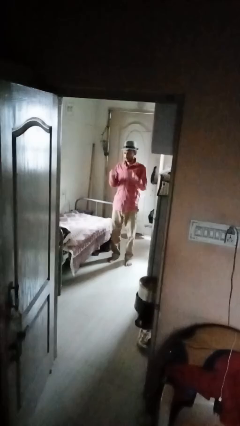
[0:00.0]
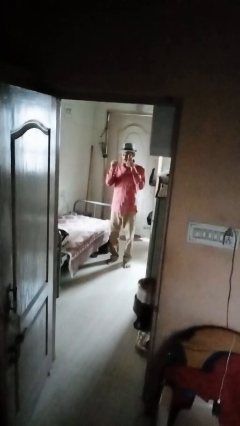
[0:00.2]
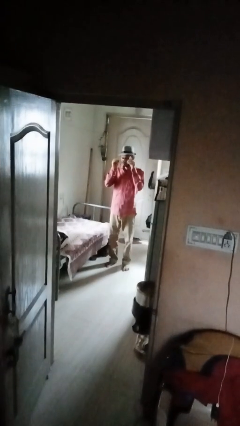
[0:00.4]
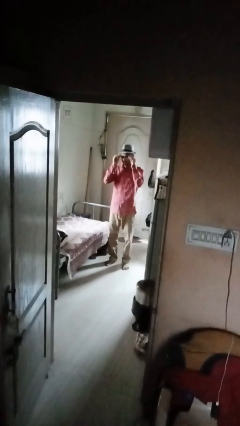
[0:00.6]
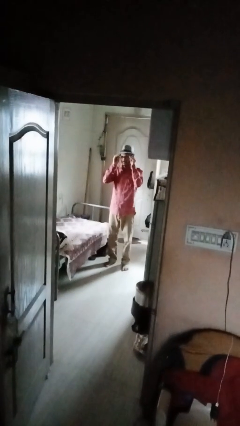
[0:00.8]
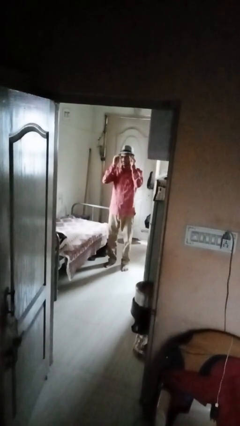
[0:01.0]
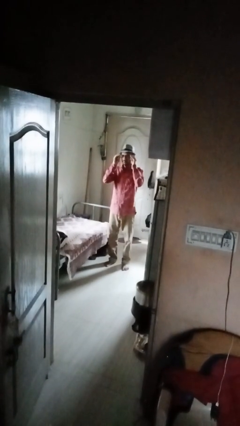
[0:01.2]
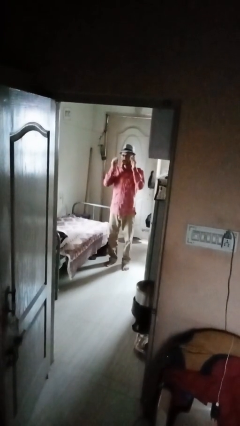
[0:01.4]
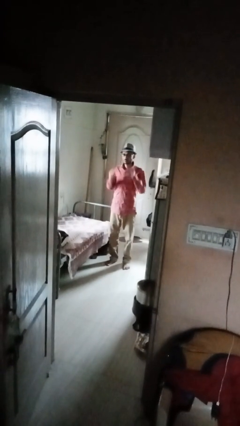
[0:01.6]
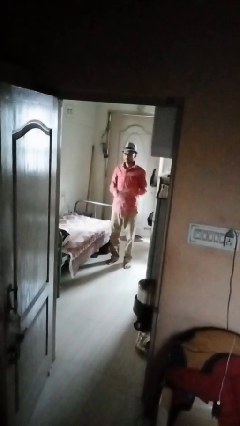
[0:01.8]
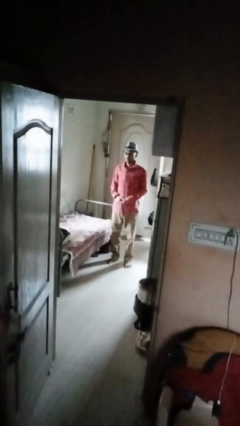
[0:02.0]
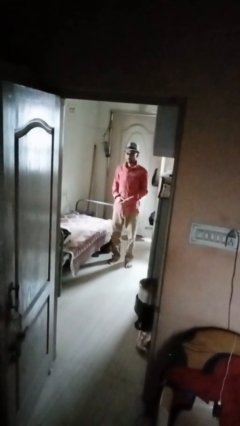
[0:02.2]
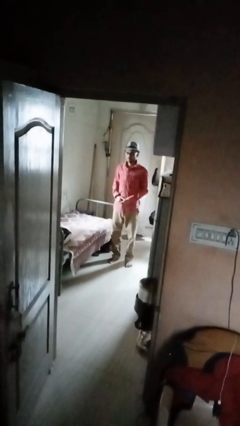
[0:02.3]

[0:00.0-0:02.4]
person puts on glasses

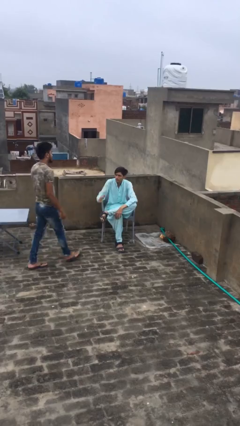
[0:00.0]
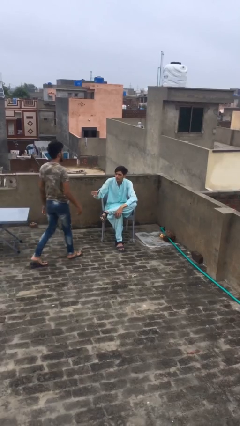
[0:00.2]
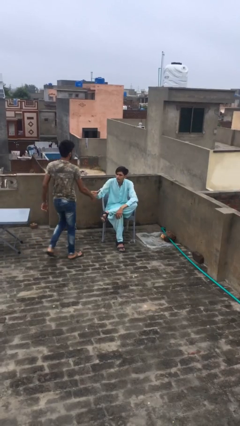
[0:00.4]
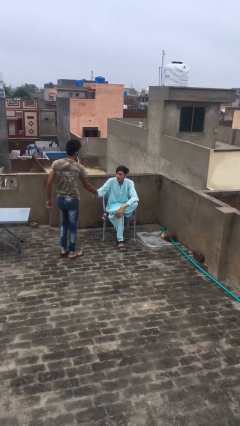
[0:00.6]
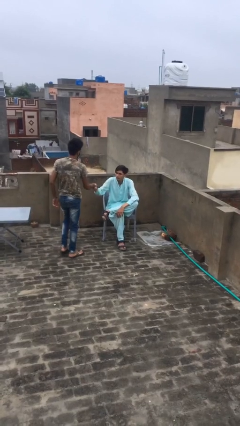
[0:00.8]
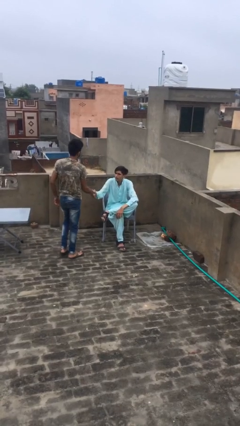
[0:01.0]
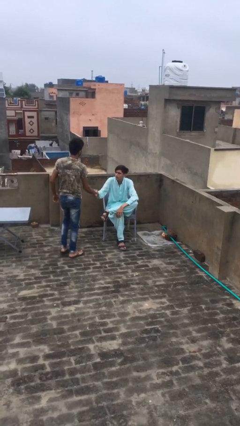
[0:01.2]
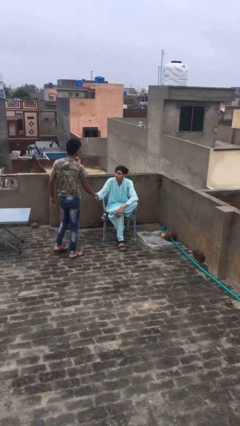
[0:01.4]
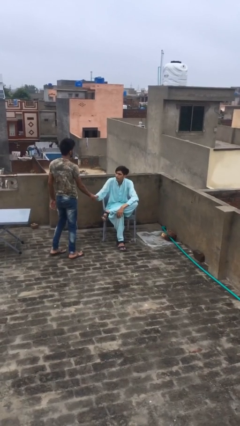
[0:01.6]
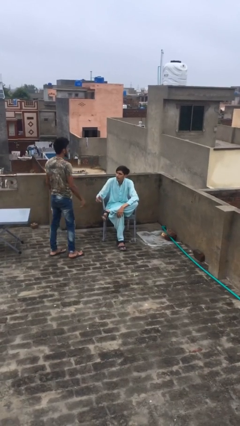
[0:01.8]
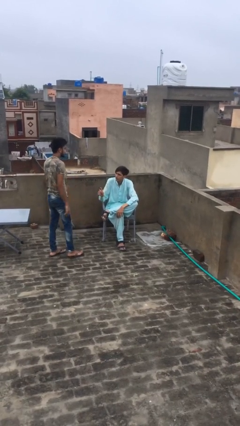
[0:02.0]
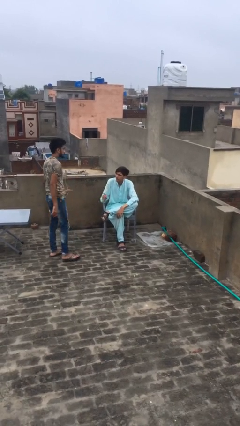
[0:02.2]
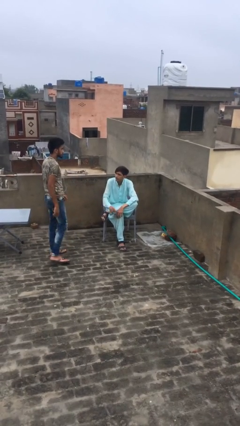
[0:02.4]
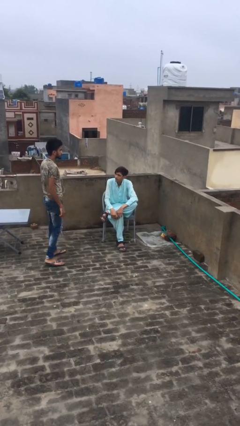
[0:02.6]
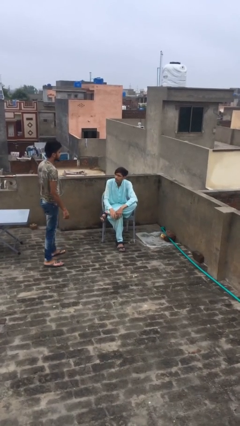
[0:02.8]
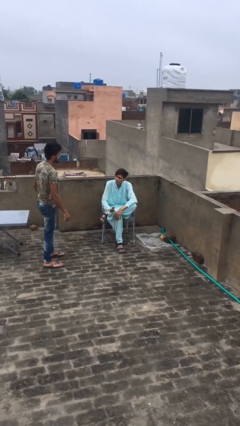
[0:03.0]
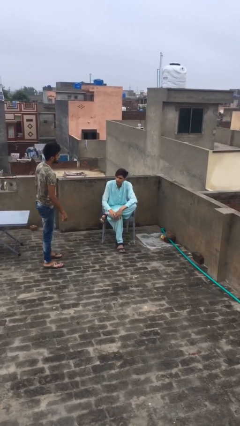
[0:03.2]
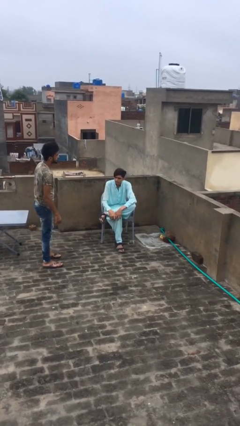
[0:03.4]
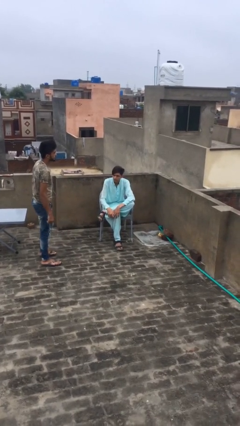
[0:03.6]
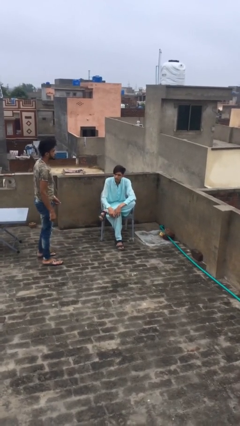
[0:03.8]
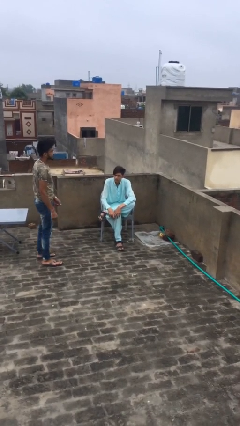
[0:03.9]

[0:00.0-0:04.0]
person shakes hand

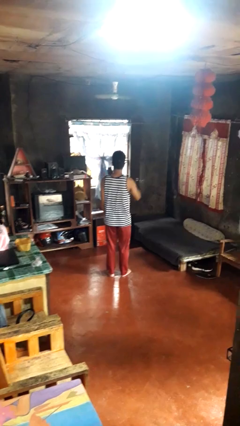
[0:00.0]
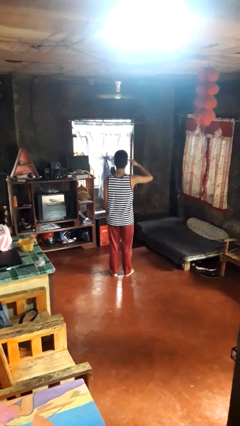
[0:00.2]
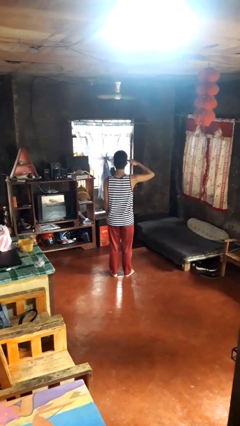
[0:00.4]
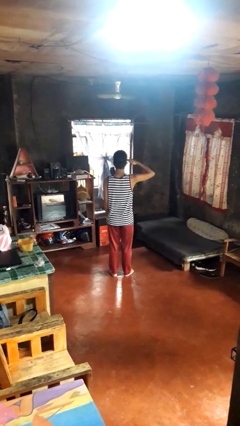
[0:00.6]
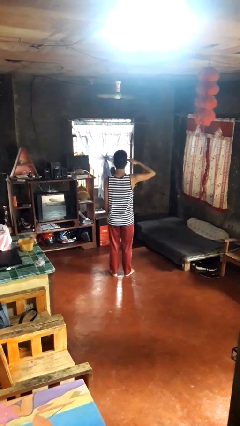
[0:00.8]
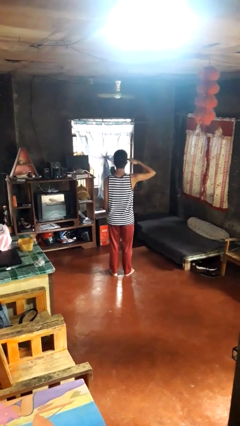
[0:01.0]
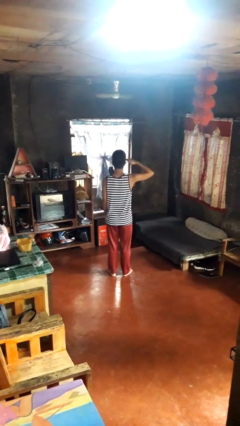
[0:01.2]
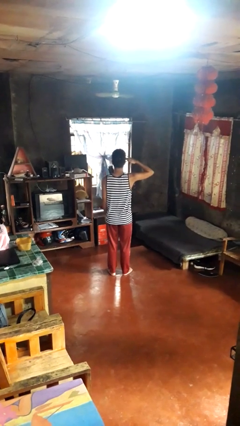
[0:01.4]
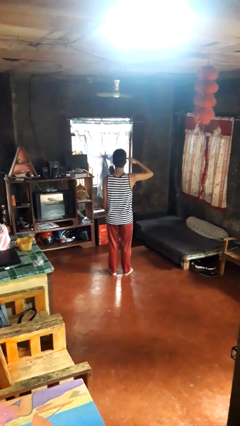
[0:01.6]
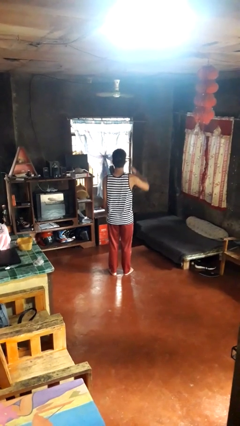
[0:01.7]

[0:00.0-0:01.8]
person salutes

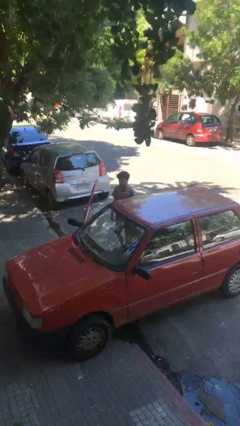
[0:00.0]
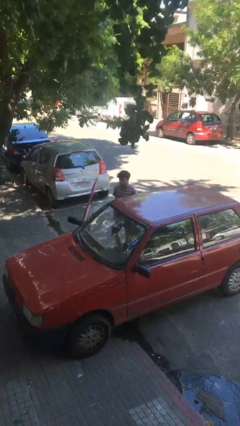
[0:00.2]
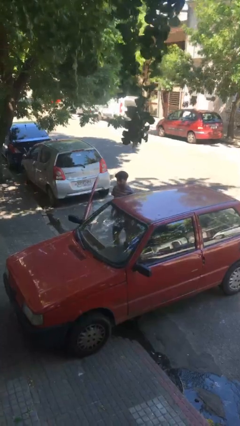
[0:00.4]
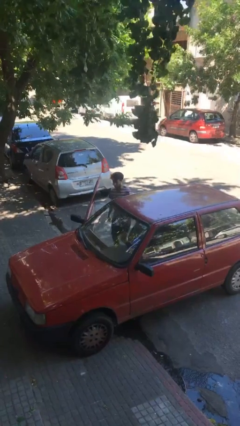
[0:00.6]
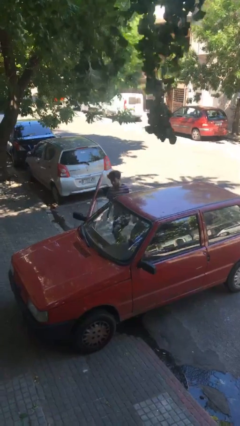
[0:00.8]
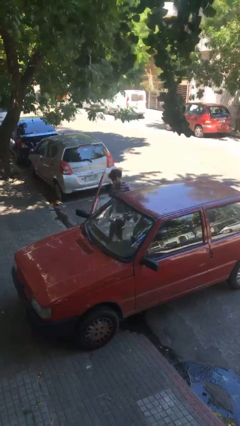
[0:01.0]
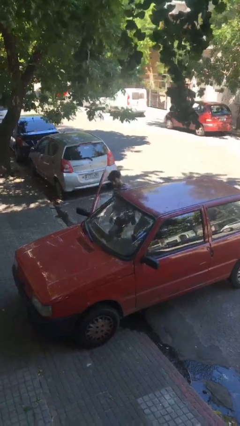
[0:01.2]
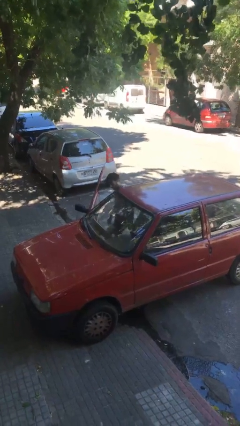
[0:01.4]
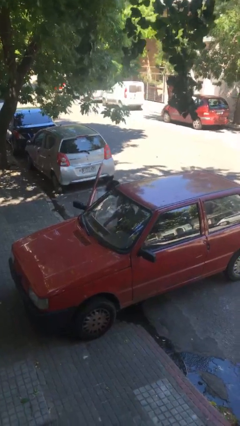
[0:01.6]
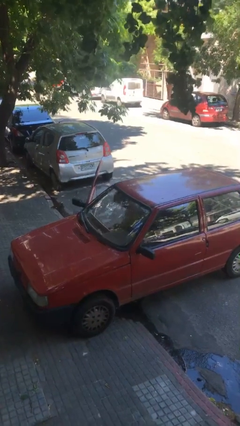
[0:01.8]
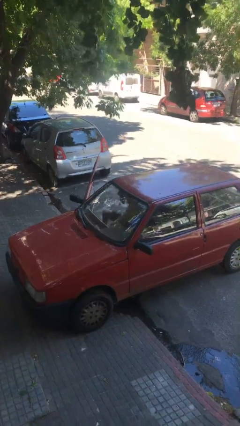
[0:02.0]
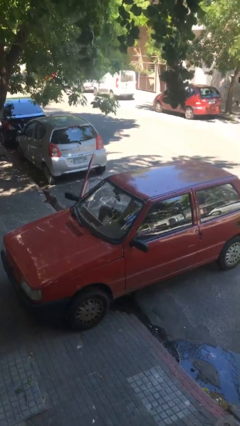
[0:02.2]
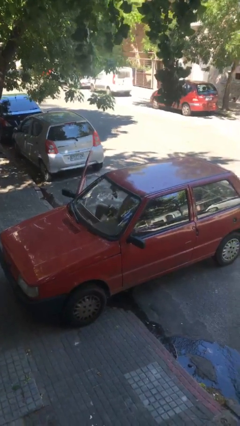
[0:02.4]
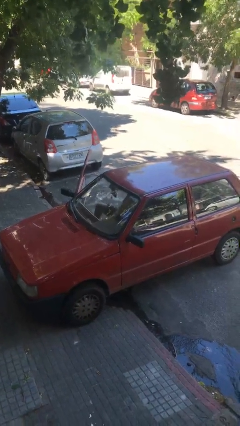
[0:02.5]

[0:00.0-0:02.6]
person enters car

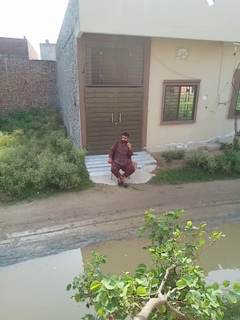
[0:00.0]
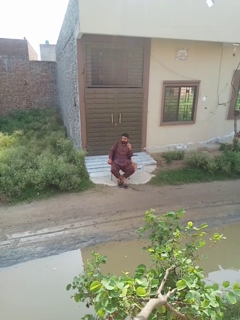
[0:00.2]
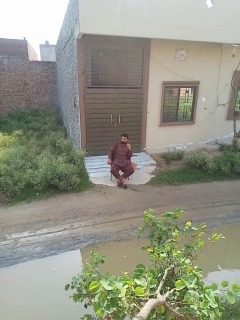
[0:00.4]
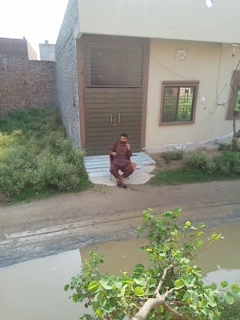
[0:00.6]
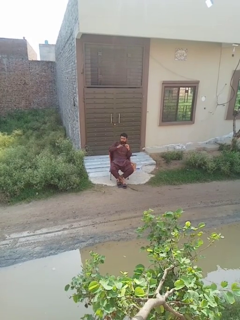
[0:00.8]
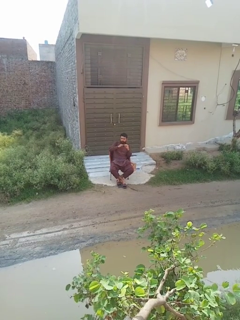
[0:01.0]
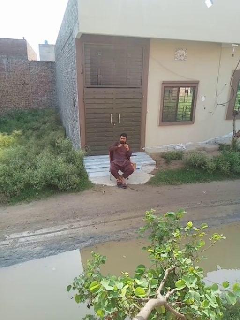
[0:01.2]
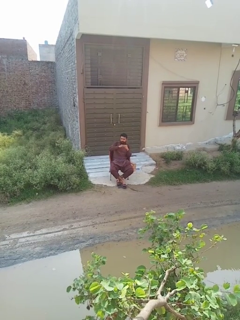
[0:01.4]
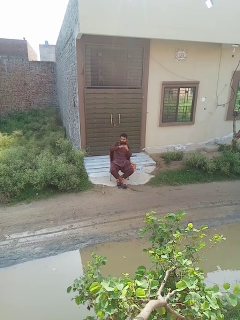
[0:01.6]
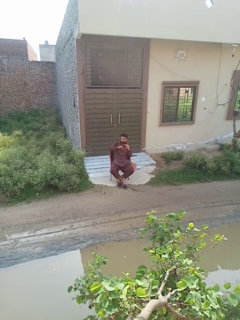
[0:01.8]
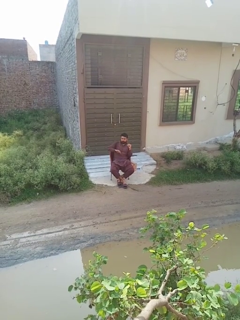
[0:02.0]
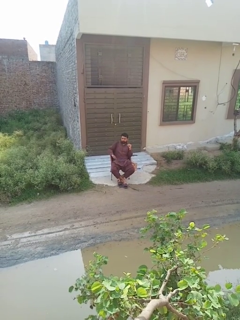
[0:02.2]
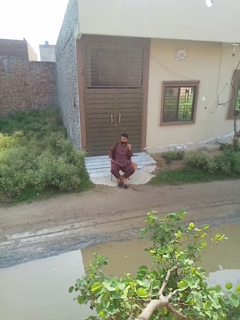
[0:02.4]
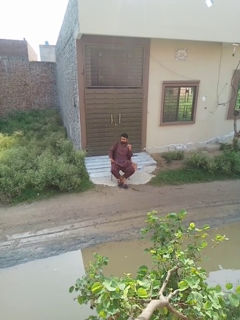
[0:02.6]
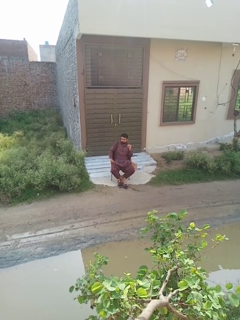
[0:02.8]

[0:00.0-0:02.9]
person puts on ring

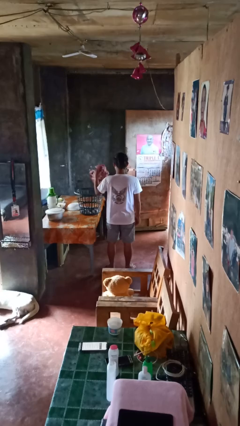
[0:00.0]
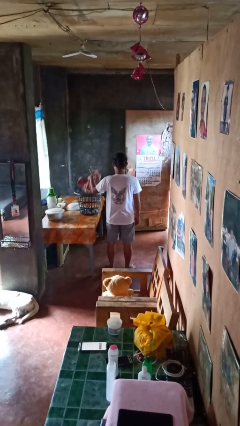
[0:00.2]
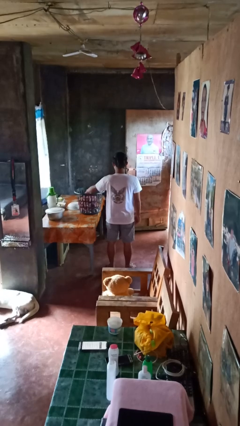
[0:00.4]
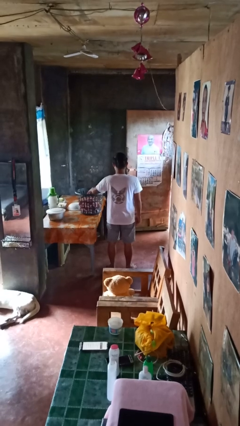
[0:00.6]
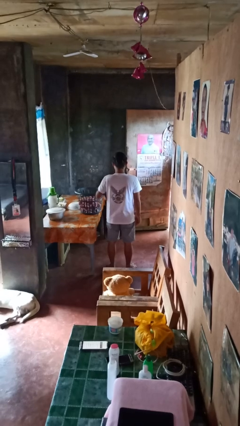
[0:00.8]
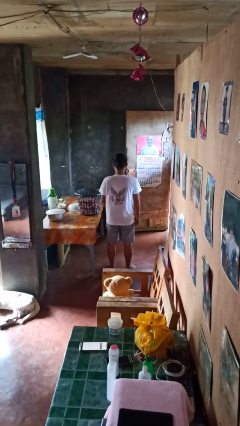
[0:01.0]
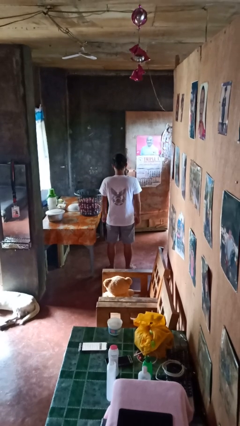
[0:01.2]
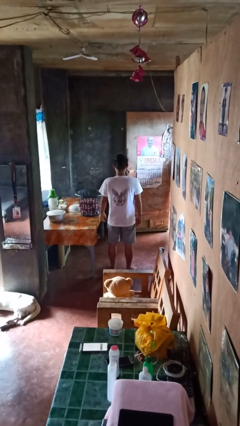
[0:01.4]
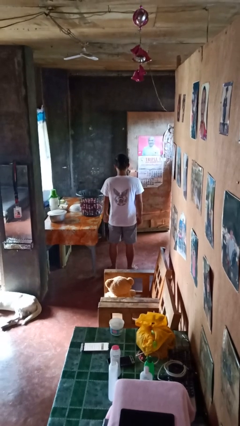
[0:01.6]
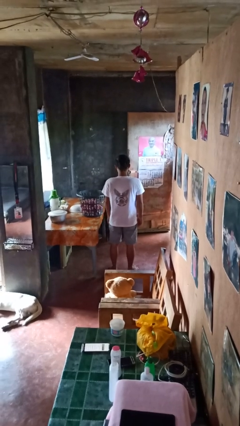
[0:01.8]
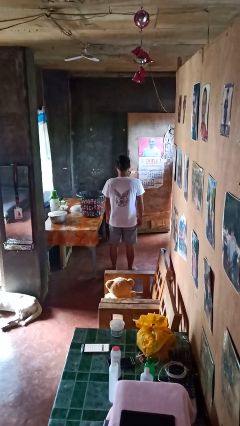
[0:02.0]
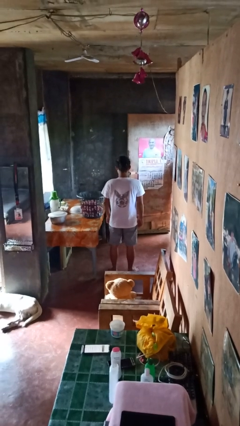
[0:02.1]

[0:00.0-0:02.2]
person puts object into basket

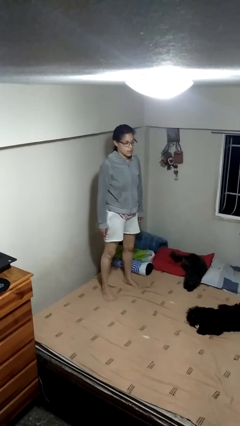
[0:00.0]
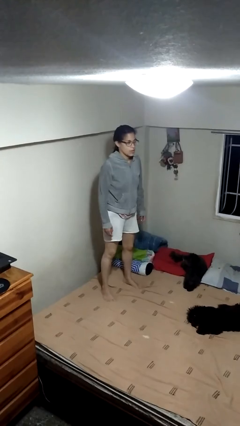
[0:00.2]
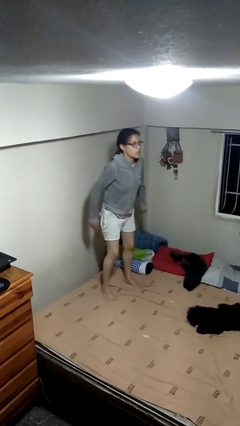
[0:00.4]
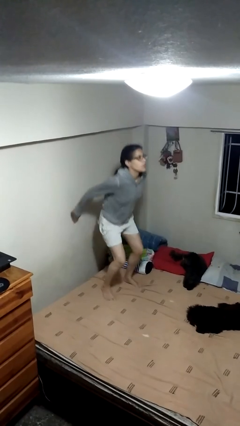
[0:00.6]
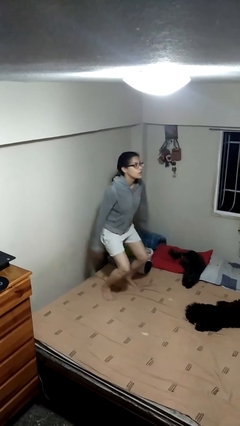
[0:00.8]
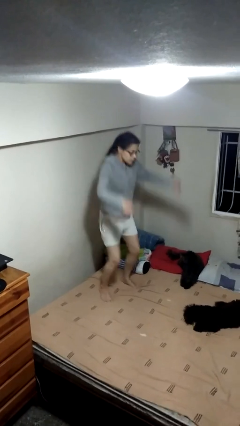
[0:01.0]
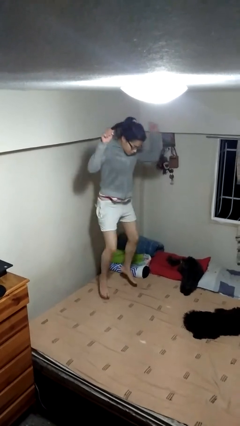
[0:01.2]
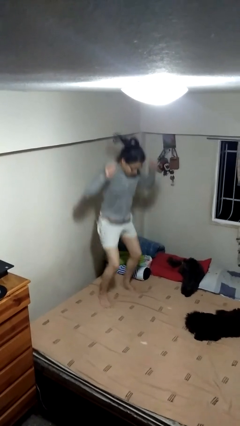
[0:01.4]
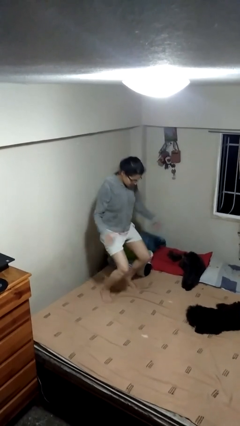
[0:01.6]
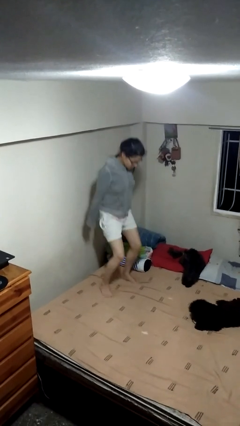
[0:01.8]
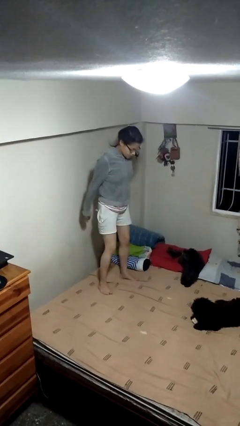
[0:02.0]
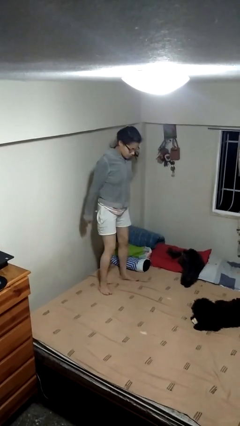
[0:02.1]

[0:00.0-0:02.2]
person jumps on bed
